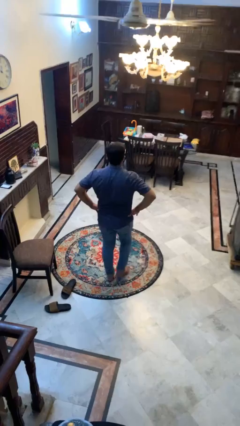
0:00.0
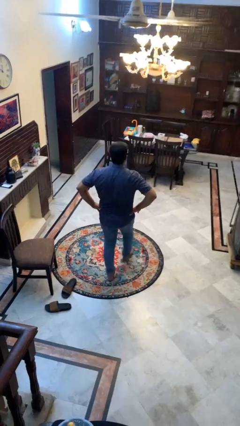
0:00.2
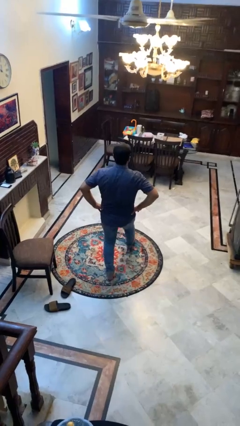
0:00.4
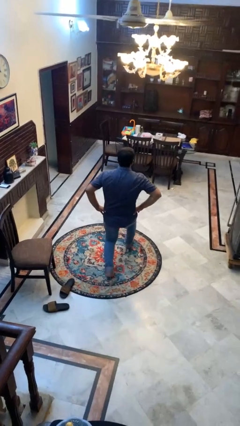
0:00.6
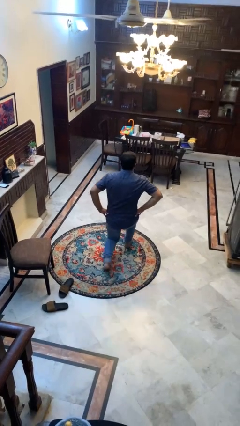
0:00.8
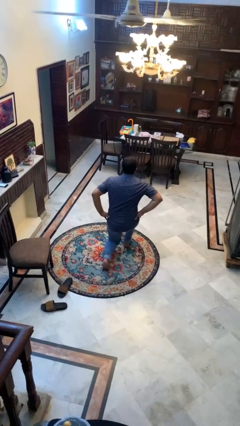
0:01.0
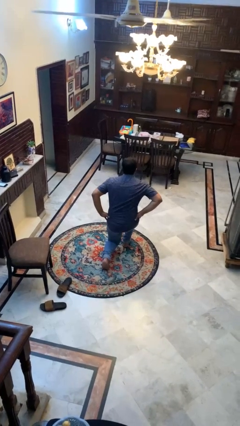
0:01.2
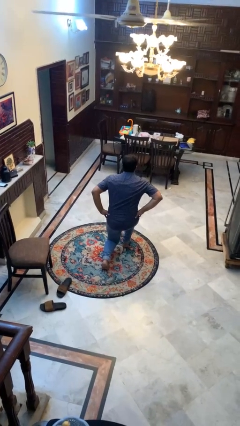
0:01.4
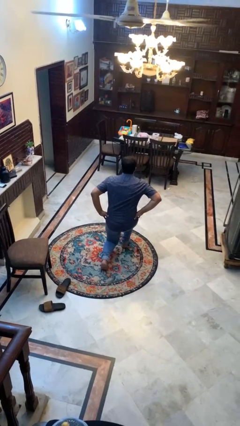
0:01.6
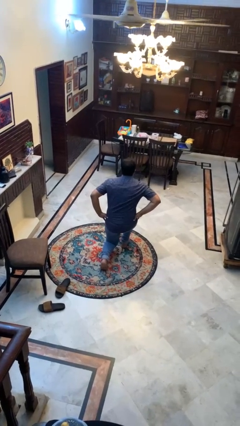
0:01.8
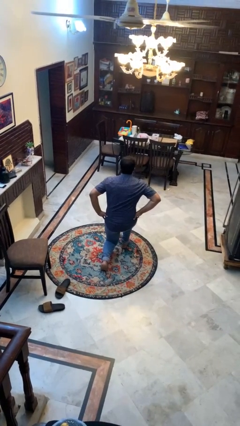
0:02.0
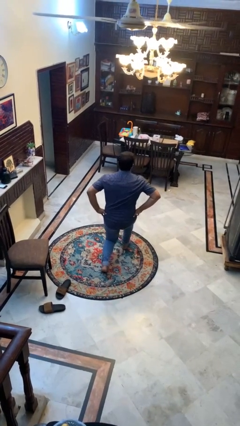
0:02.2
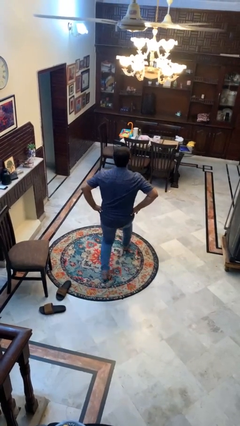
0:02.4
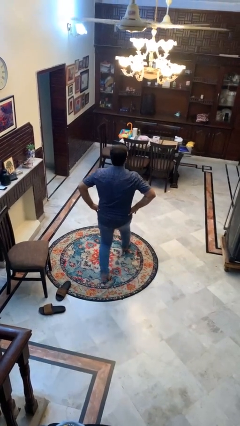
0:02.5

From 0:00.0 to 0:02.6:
person exercises with lunges

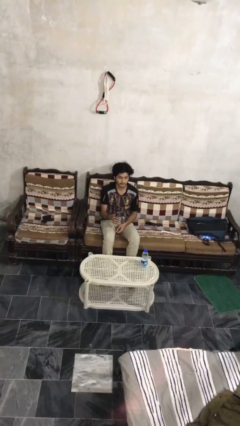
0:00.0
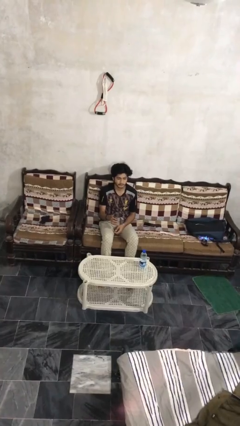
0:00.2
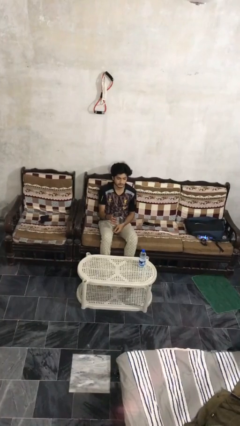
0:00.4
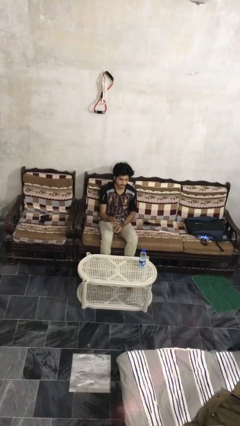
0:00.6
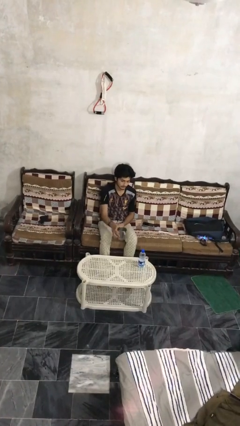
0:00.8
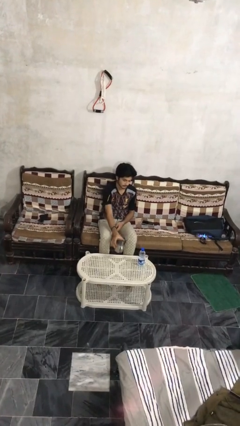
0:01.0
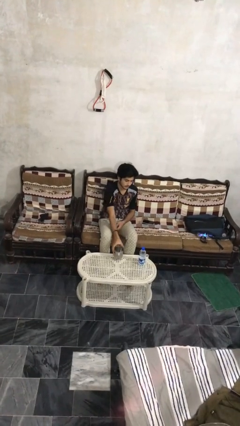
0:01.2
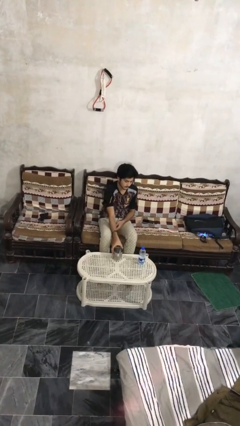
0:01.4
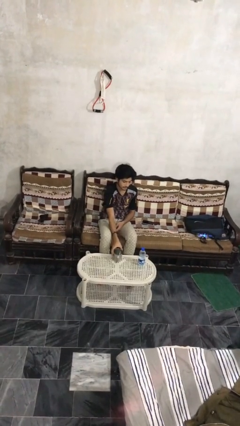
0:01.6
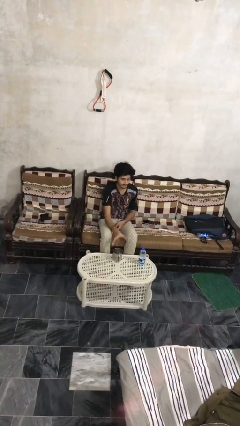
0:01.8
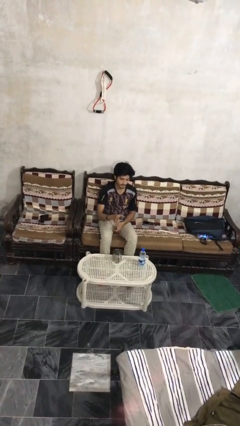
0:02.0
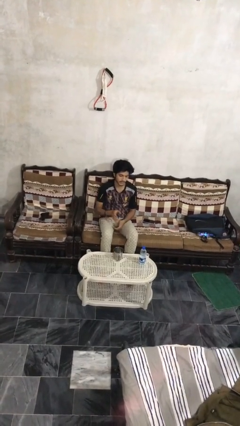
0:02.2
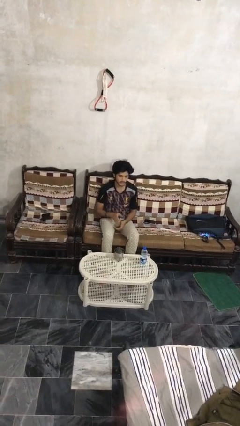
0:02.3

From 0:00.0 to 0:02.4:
person puts down object on table

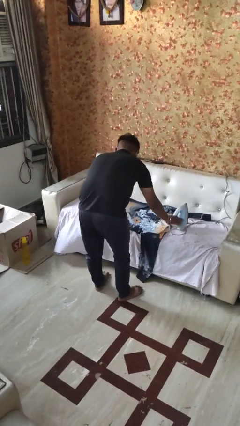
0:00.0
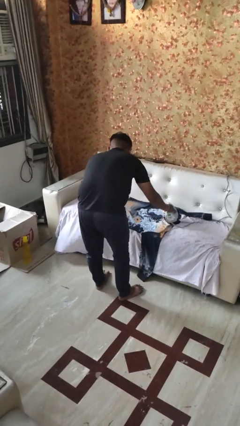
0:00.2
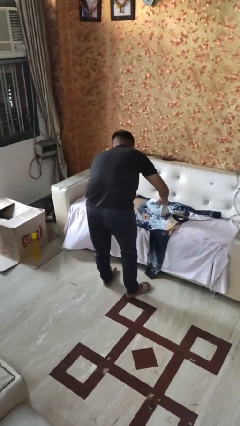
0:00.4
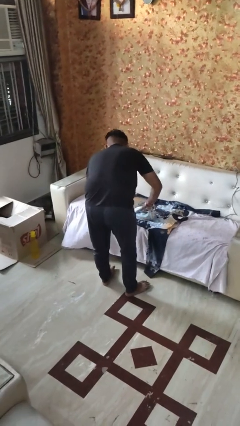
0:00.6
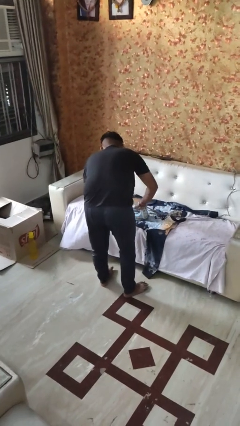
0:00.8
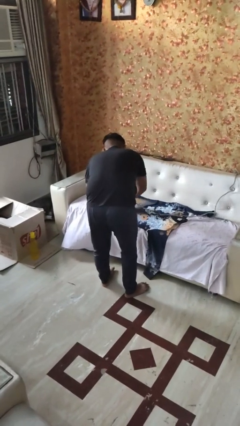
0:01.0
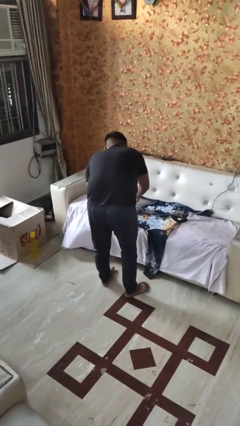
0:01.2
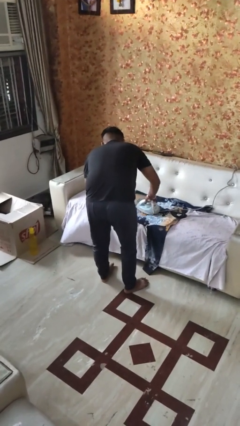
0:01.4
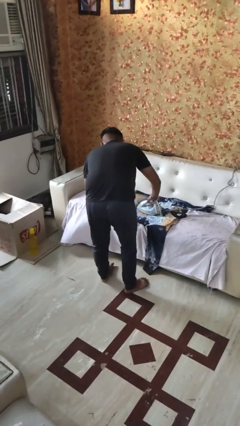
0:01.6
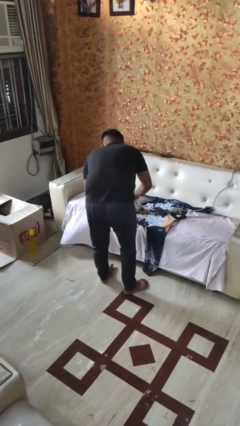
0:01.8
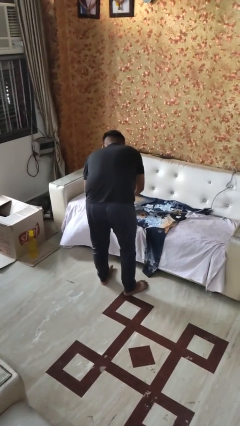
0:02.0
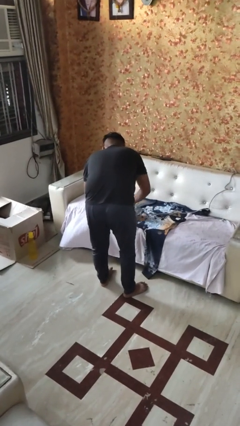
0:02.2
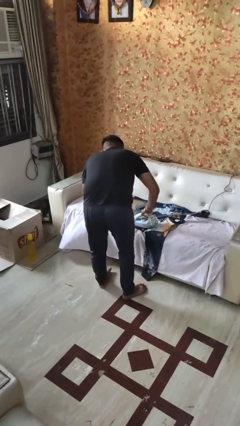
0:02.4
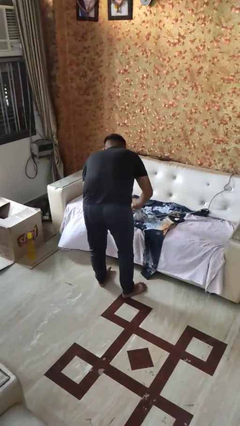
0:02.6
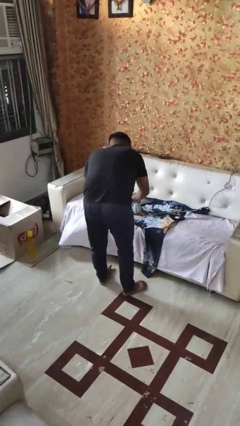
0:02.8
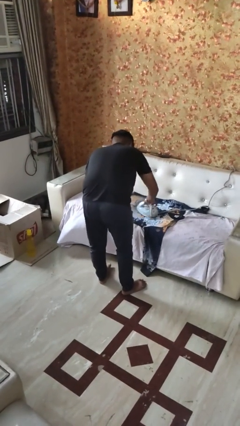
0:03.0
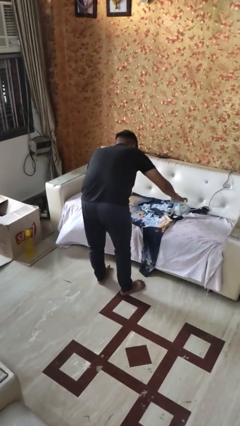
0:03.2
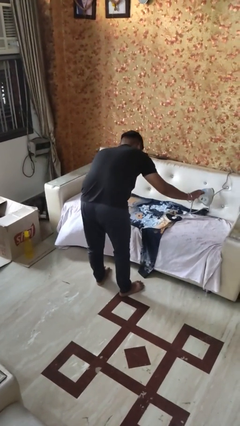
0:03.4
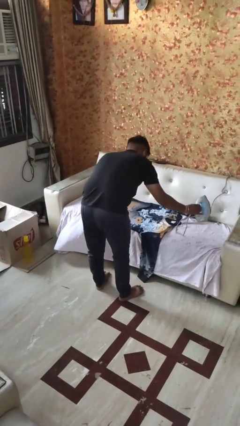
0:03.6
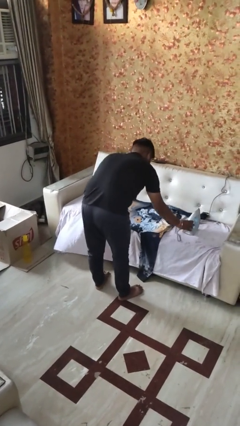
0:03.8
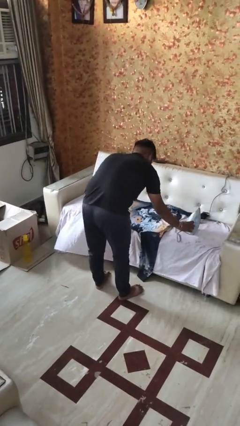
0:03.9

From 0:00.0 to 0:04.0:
person irons clothes

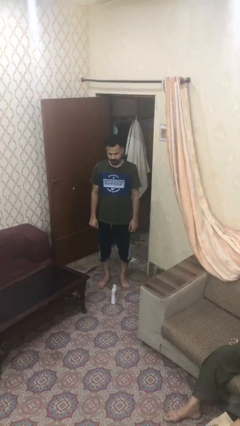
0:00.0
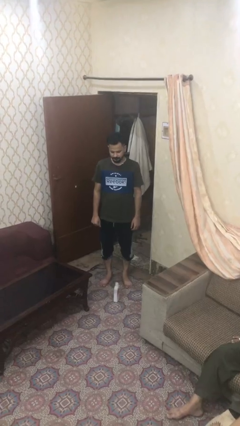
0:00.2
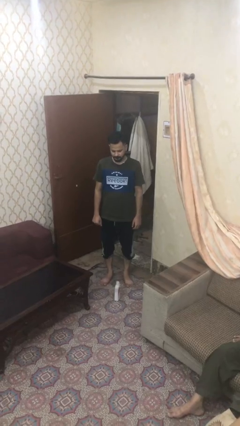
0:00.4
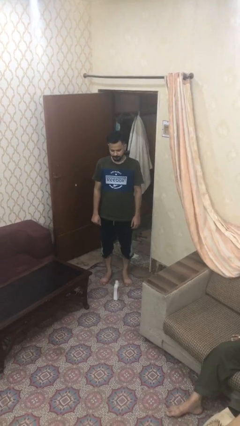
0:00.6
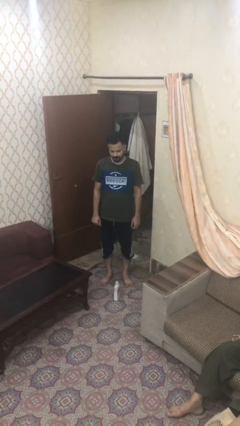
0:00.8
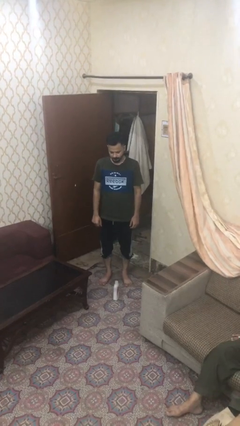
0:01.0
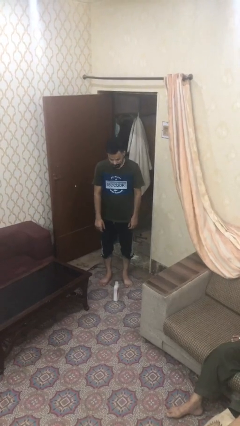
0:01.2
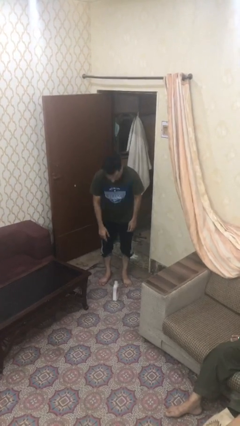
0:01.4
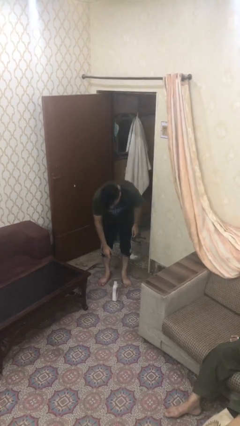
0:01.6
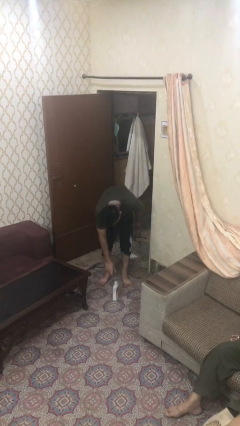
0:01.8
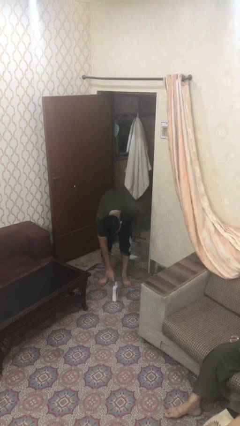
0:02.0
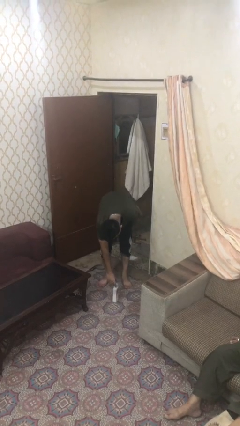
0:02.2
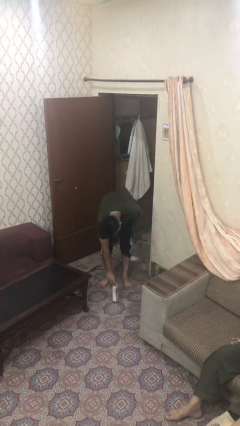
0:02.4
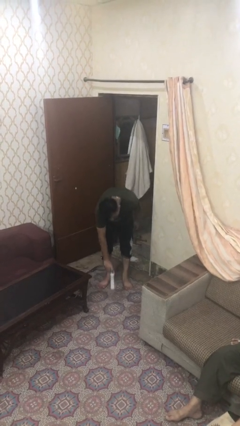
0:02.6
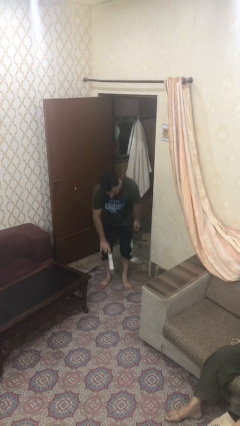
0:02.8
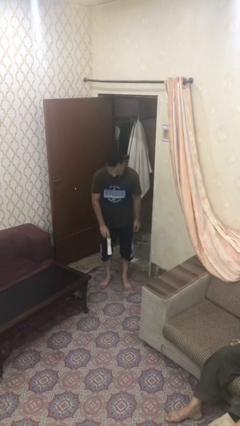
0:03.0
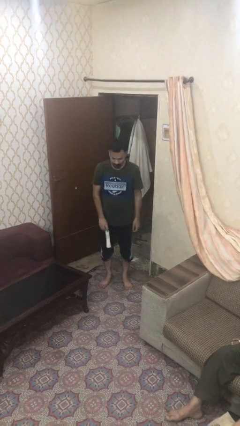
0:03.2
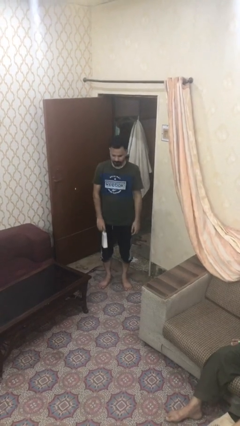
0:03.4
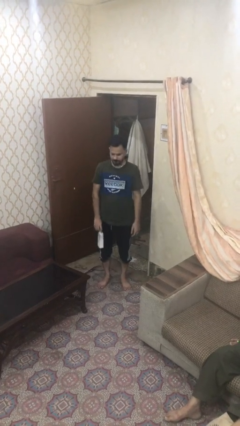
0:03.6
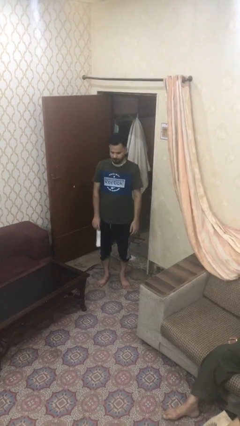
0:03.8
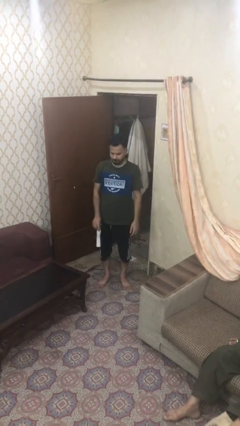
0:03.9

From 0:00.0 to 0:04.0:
person picks up object from floor

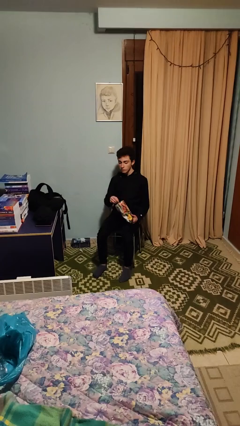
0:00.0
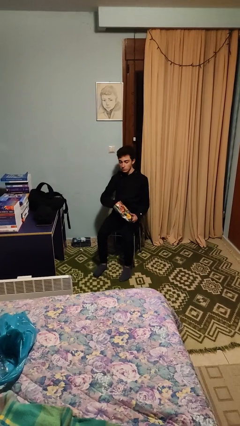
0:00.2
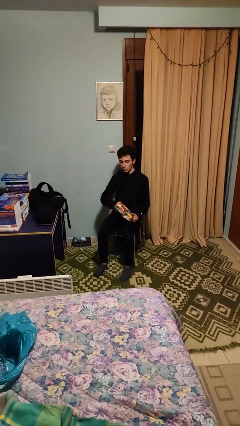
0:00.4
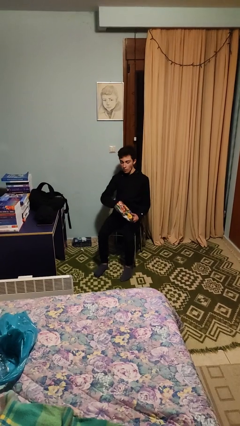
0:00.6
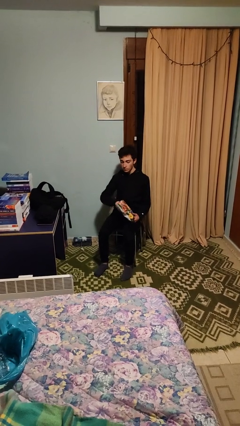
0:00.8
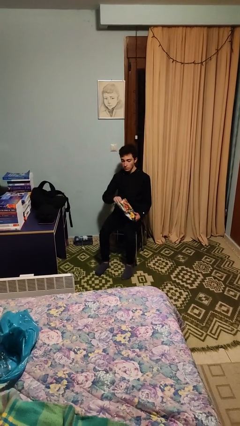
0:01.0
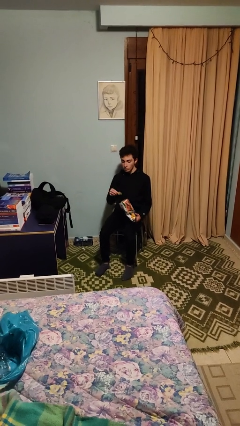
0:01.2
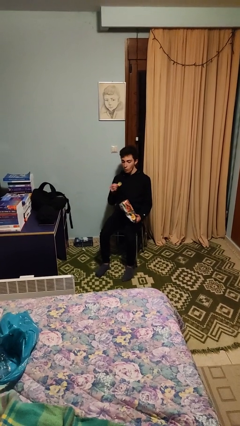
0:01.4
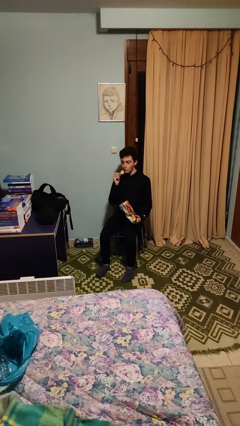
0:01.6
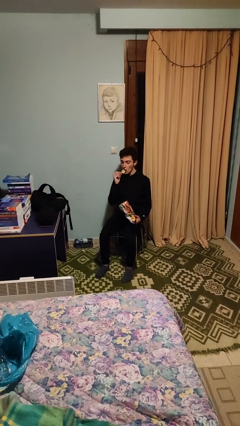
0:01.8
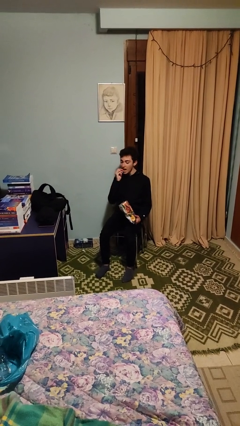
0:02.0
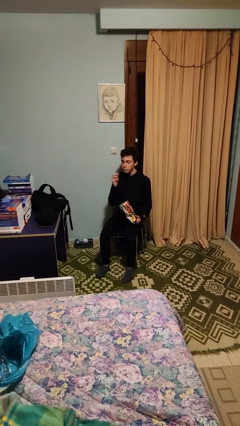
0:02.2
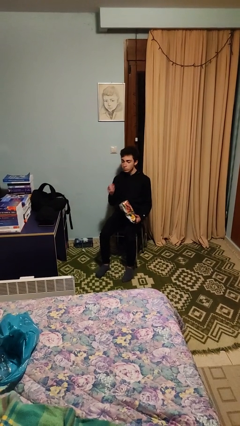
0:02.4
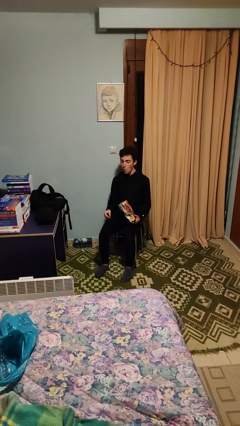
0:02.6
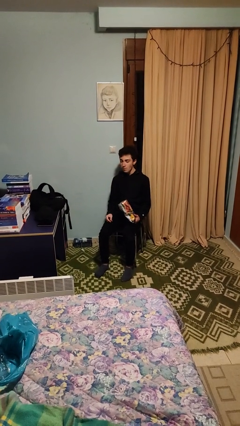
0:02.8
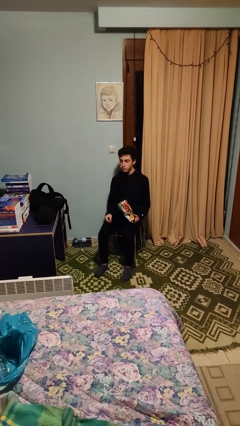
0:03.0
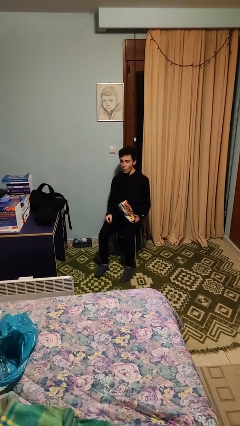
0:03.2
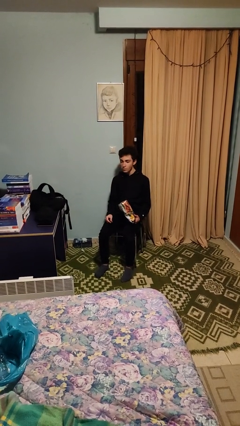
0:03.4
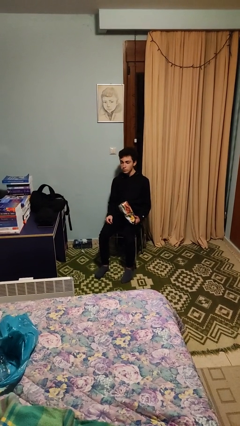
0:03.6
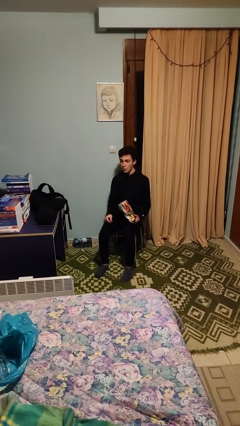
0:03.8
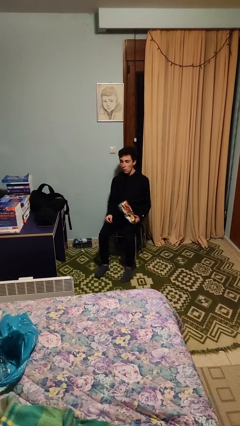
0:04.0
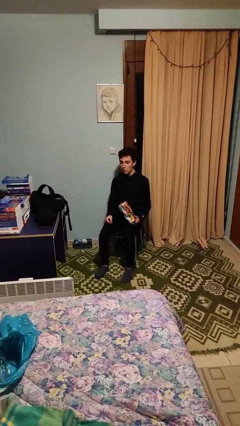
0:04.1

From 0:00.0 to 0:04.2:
person eats snack from bag

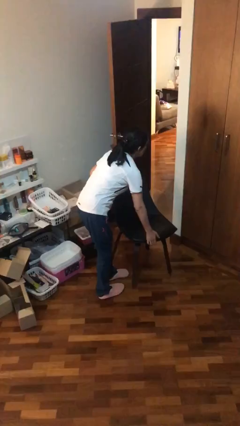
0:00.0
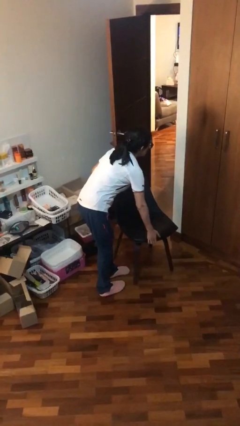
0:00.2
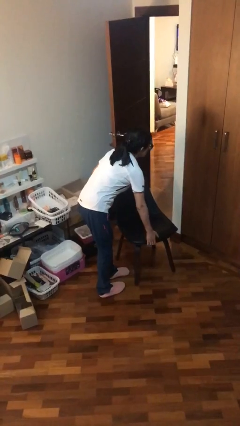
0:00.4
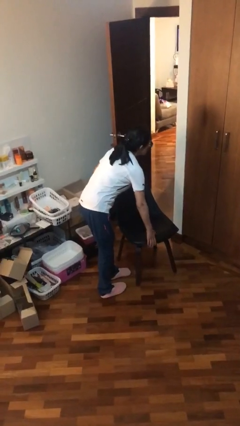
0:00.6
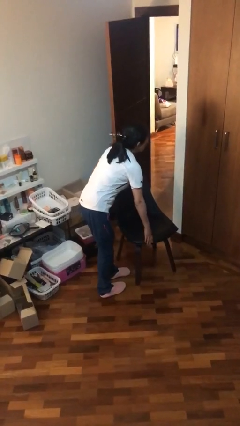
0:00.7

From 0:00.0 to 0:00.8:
person puts down object on floor
